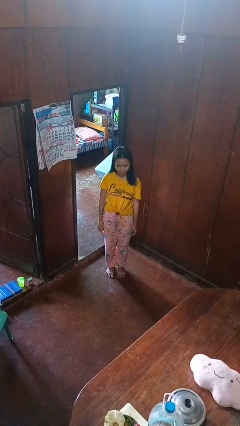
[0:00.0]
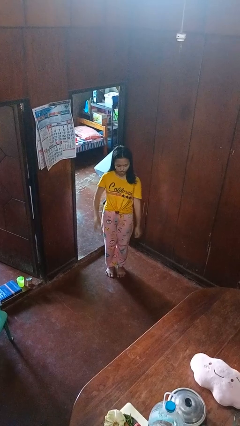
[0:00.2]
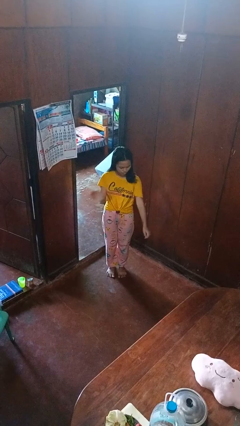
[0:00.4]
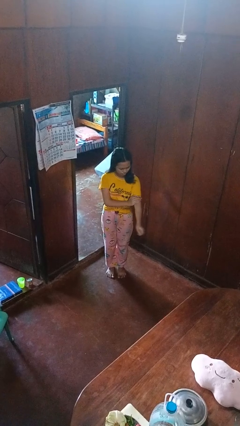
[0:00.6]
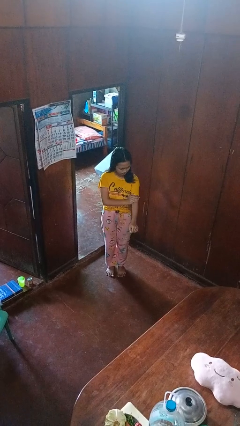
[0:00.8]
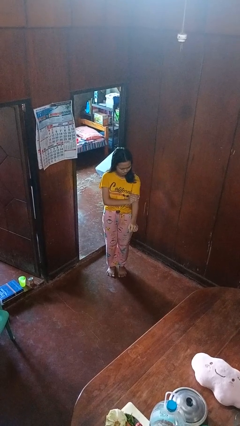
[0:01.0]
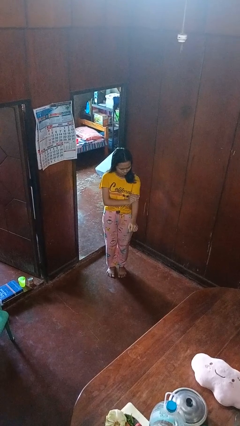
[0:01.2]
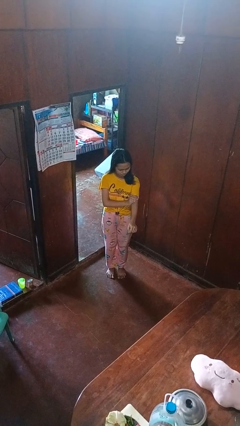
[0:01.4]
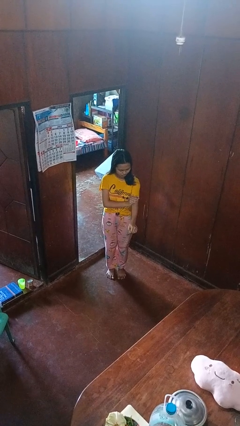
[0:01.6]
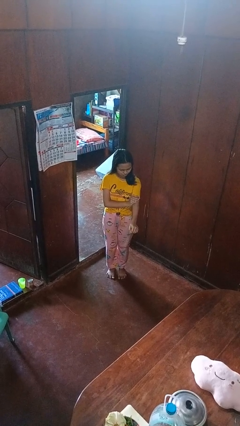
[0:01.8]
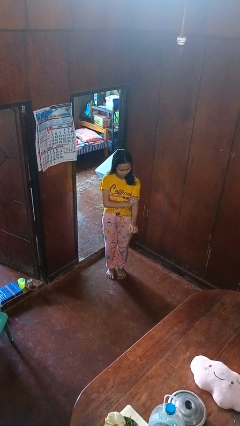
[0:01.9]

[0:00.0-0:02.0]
person swats bug

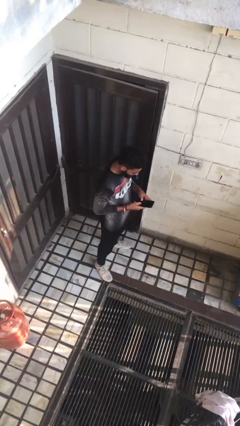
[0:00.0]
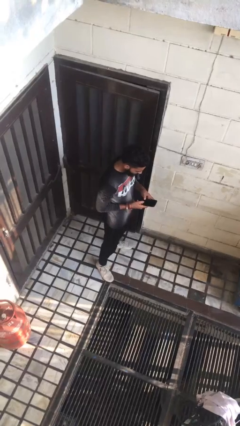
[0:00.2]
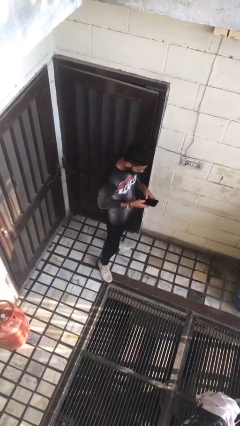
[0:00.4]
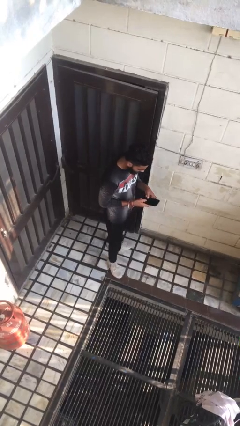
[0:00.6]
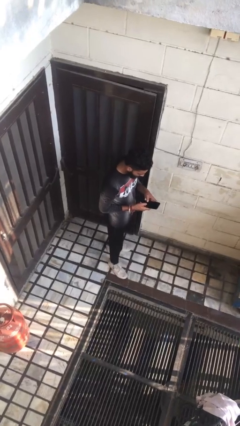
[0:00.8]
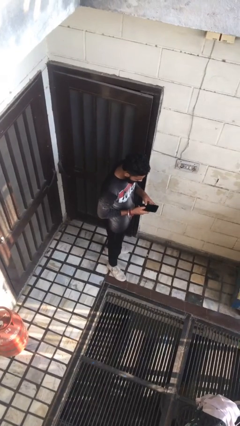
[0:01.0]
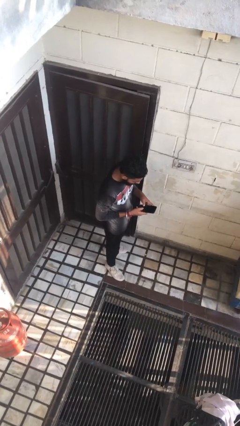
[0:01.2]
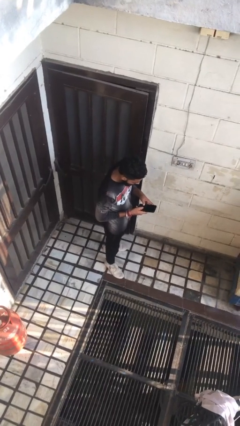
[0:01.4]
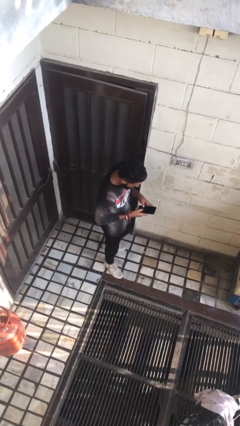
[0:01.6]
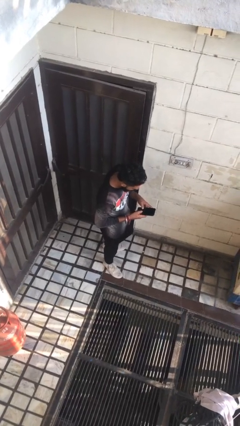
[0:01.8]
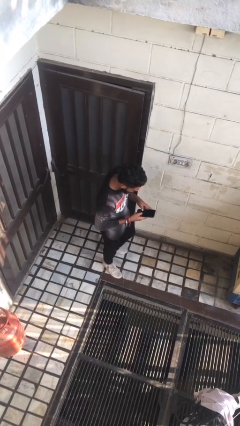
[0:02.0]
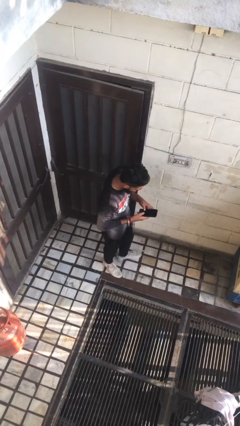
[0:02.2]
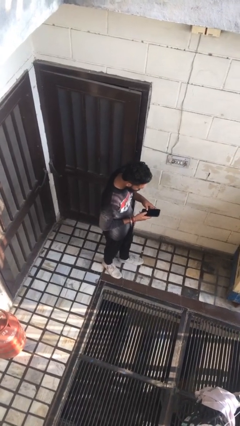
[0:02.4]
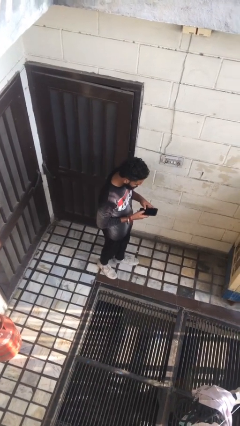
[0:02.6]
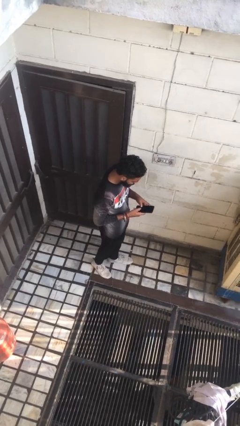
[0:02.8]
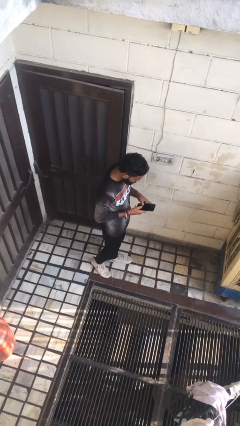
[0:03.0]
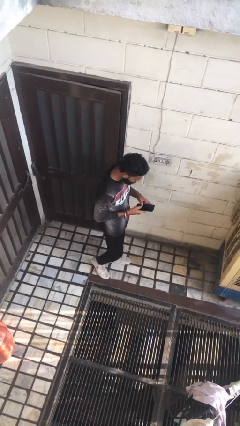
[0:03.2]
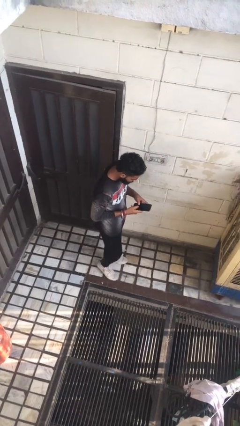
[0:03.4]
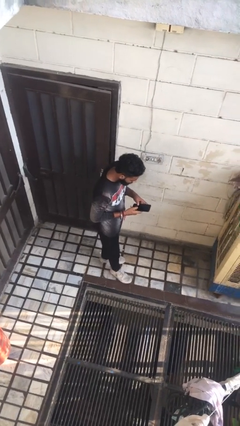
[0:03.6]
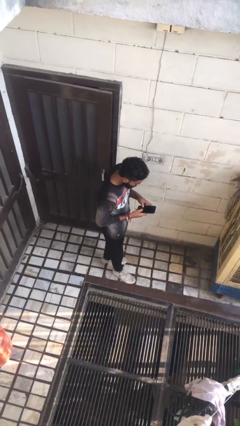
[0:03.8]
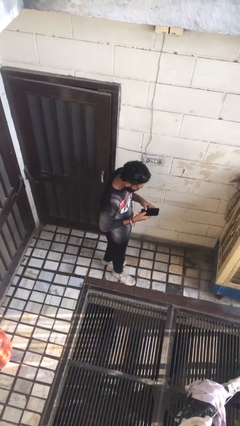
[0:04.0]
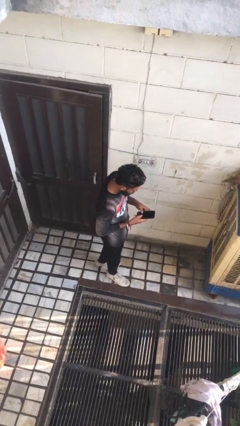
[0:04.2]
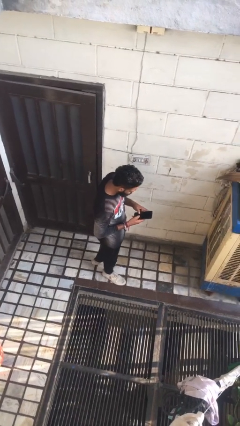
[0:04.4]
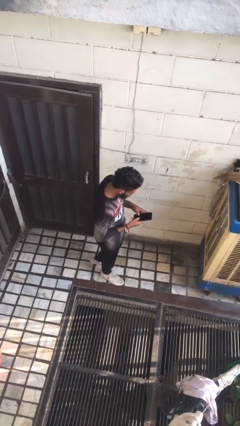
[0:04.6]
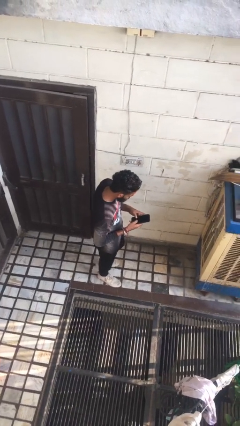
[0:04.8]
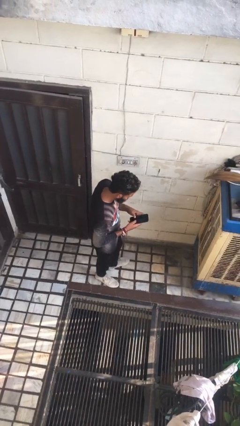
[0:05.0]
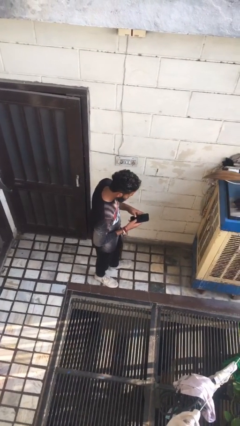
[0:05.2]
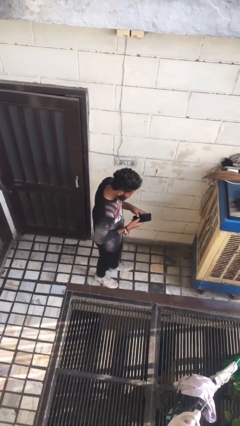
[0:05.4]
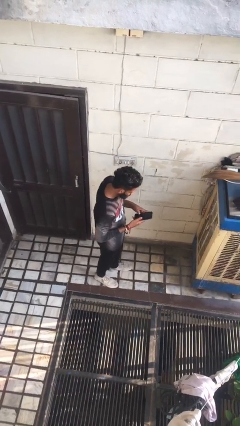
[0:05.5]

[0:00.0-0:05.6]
person texts on phone

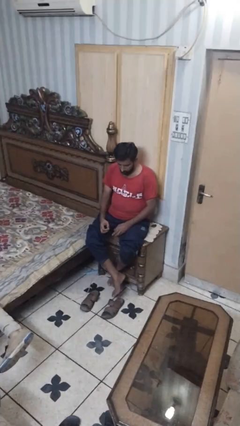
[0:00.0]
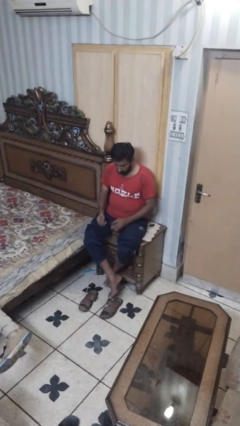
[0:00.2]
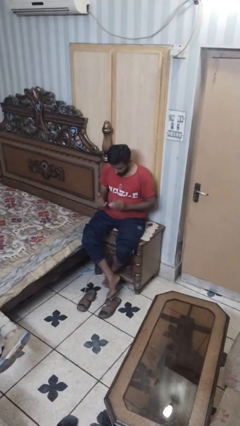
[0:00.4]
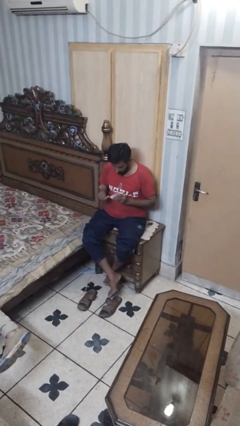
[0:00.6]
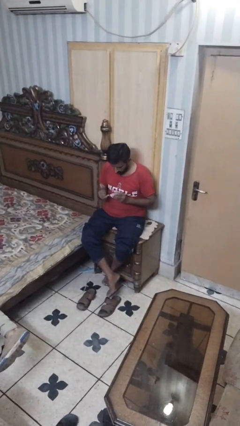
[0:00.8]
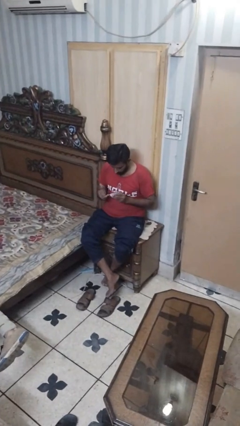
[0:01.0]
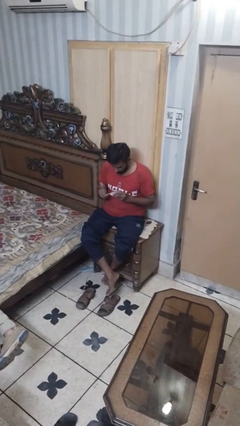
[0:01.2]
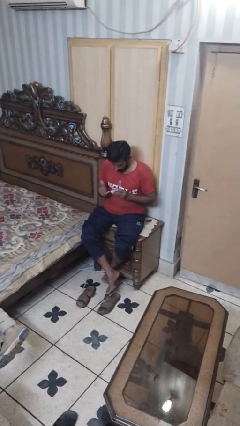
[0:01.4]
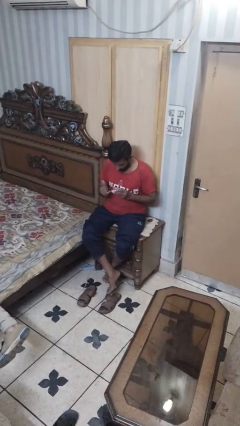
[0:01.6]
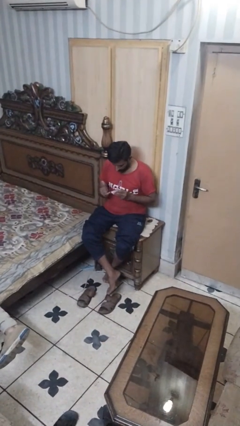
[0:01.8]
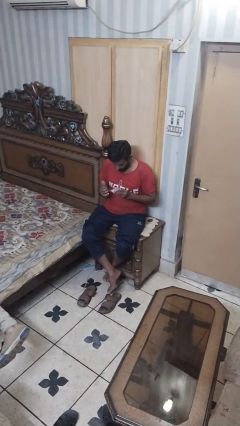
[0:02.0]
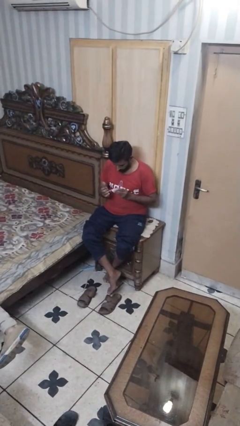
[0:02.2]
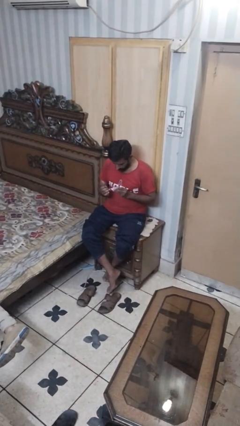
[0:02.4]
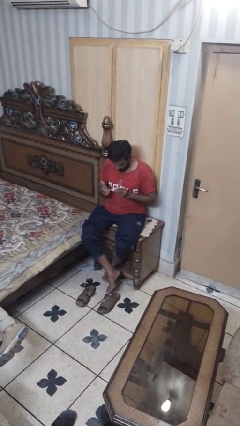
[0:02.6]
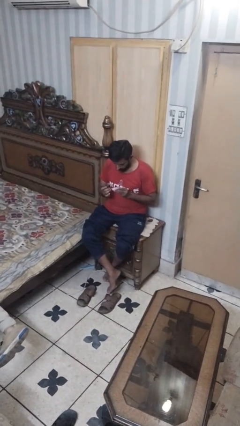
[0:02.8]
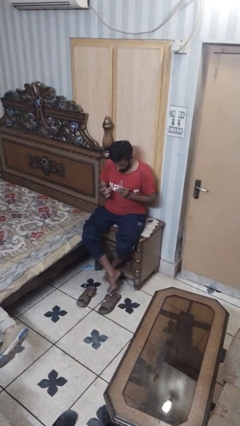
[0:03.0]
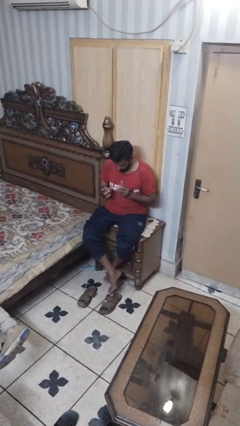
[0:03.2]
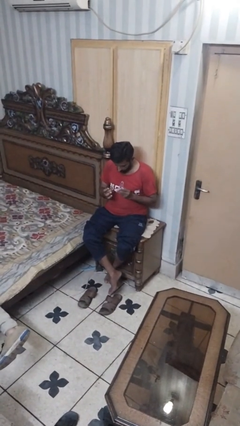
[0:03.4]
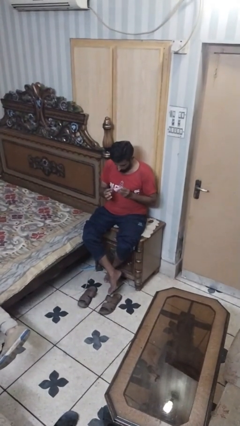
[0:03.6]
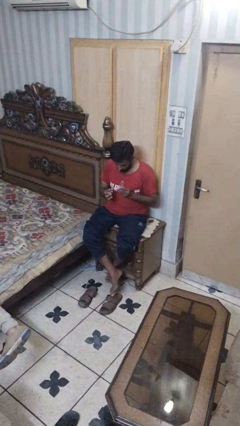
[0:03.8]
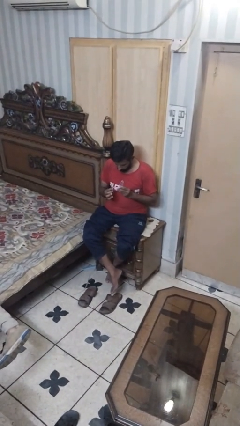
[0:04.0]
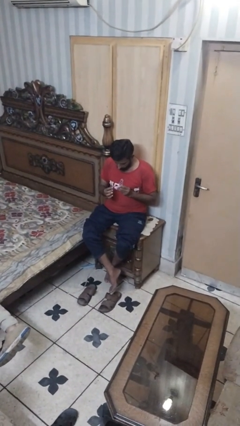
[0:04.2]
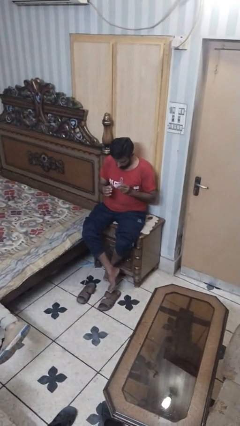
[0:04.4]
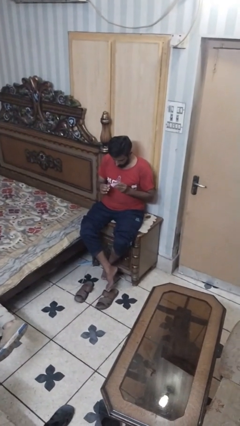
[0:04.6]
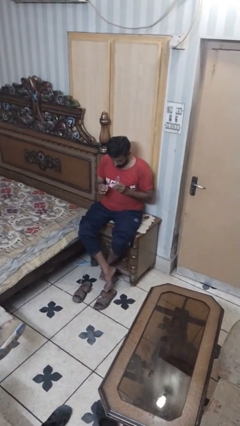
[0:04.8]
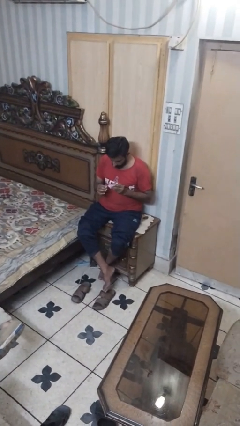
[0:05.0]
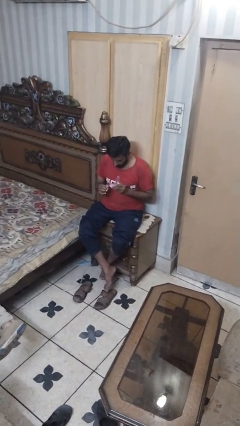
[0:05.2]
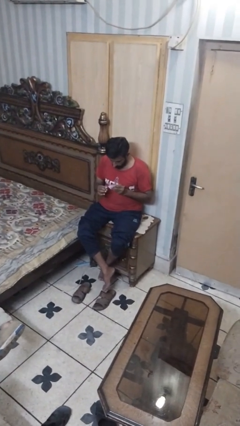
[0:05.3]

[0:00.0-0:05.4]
person clips fingernails

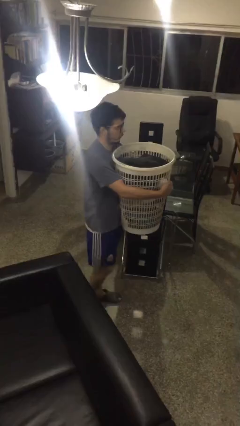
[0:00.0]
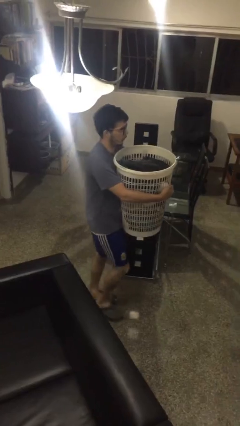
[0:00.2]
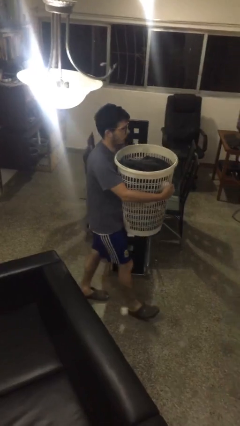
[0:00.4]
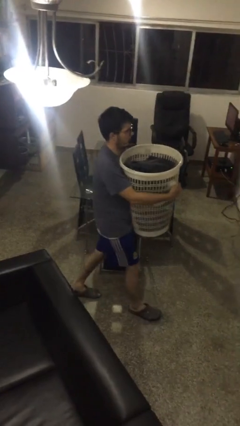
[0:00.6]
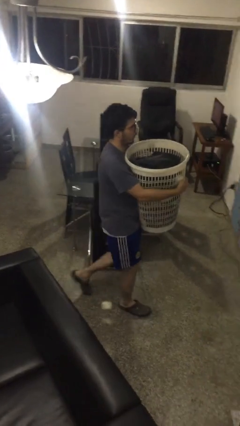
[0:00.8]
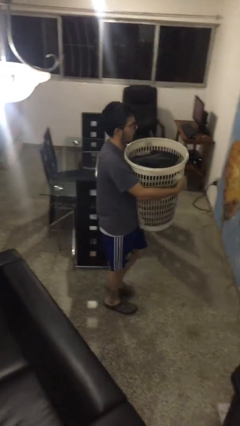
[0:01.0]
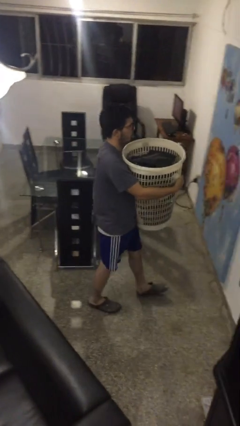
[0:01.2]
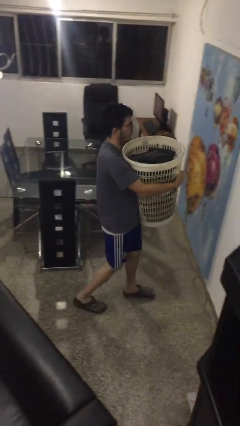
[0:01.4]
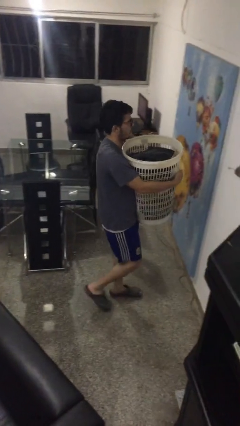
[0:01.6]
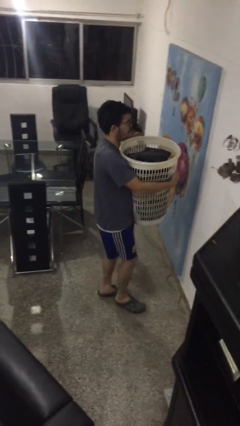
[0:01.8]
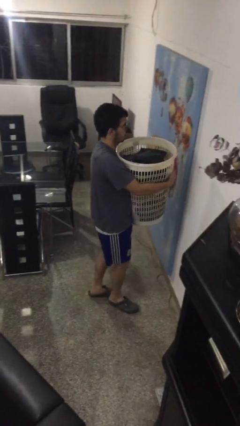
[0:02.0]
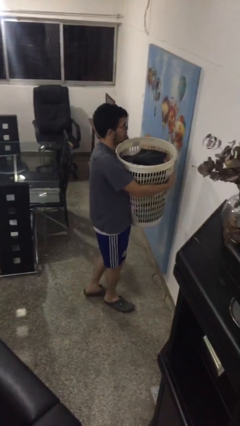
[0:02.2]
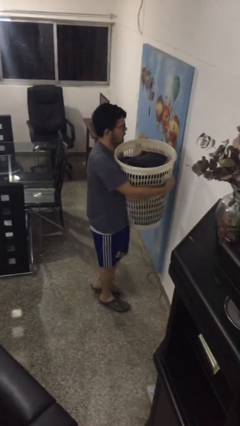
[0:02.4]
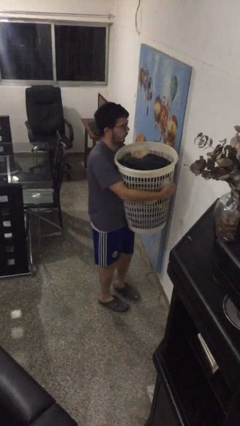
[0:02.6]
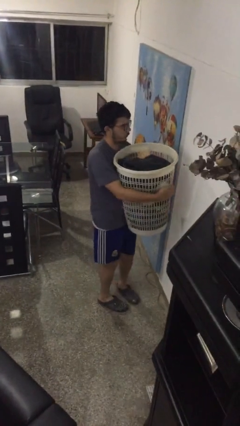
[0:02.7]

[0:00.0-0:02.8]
person carries laundry basket

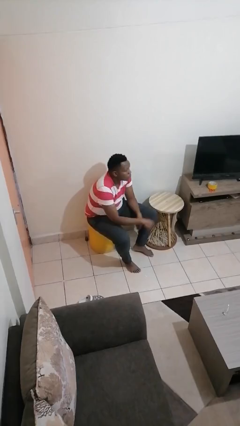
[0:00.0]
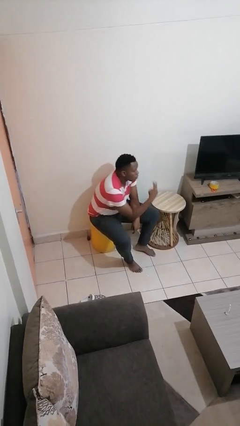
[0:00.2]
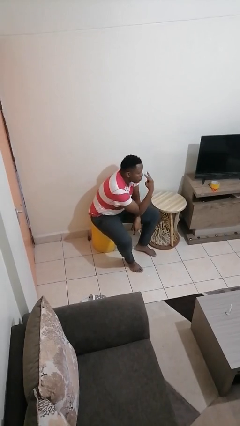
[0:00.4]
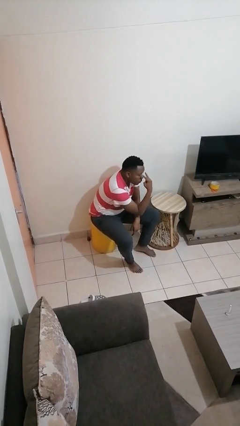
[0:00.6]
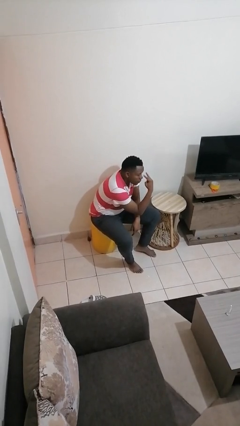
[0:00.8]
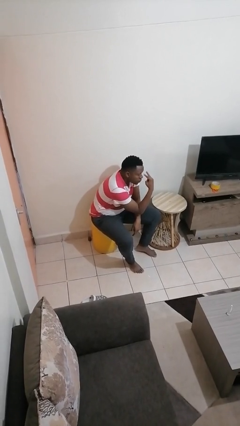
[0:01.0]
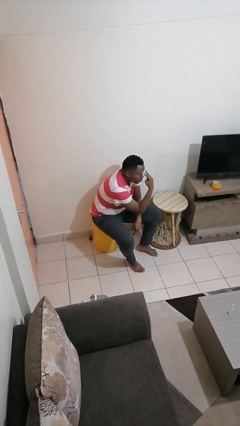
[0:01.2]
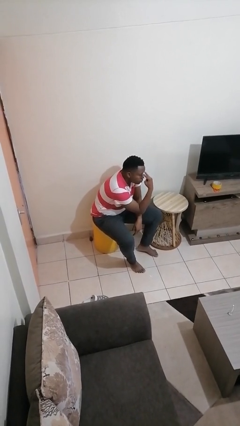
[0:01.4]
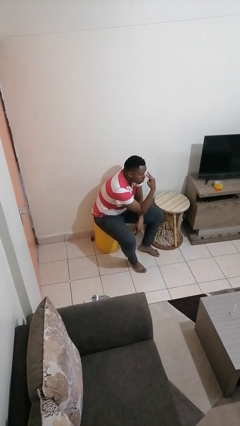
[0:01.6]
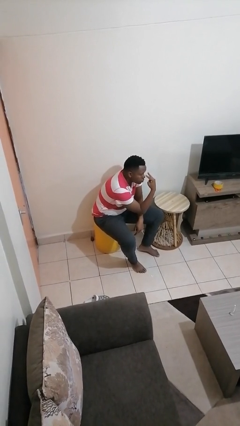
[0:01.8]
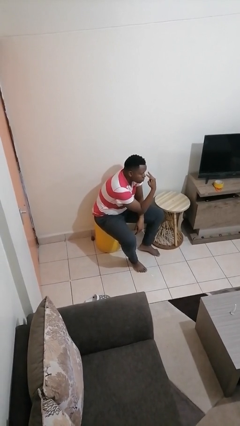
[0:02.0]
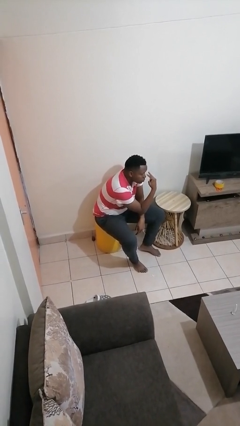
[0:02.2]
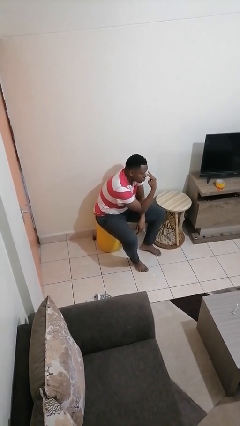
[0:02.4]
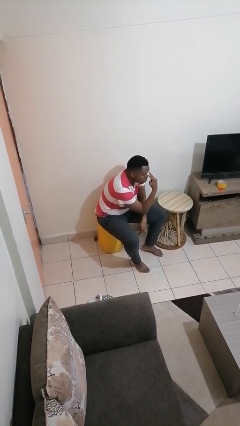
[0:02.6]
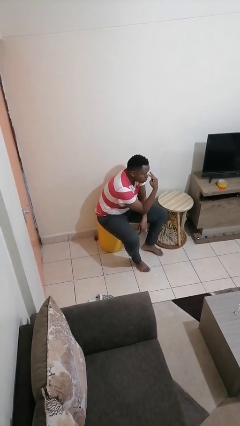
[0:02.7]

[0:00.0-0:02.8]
person gestures watch closely
